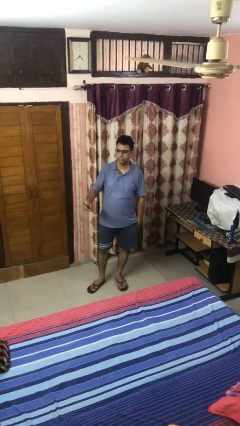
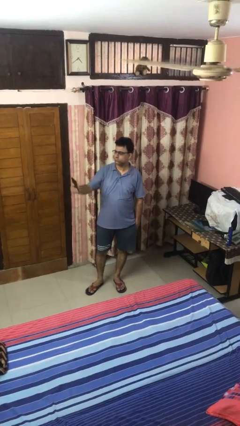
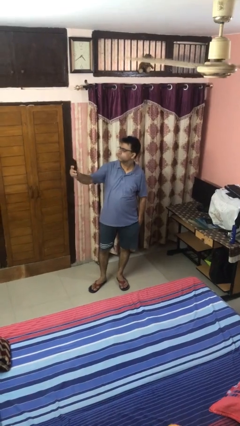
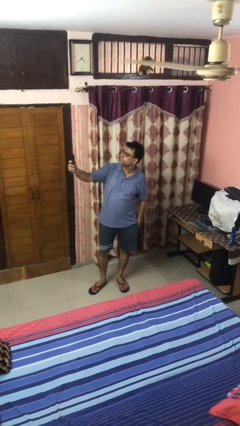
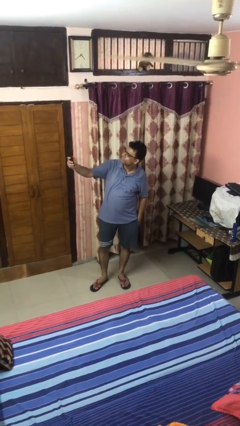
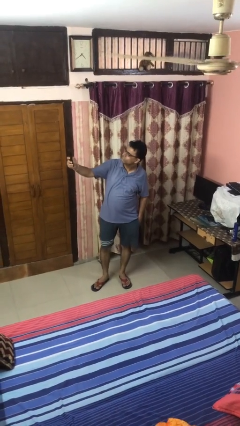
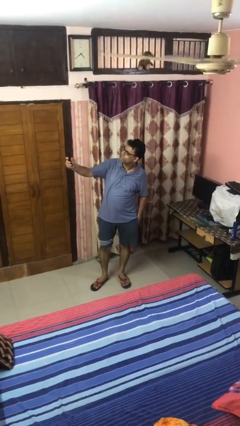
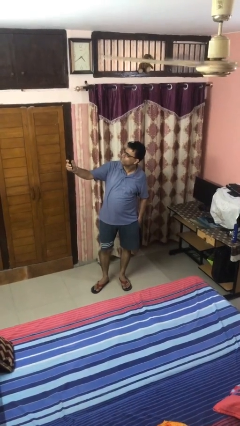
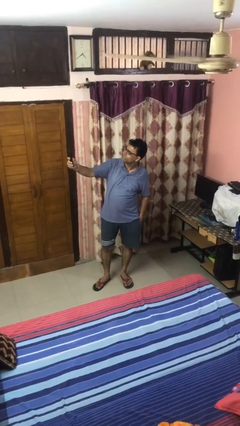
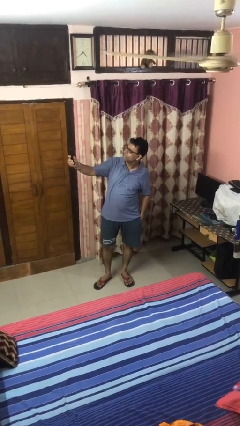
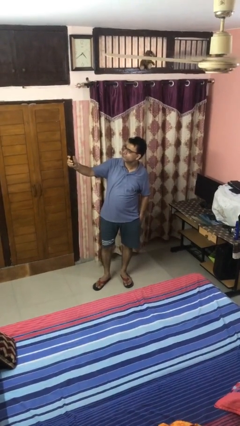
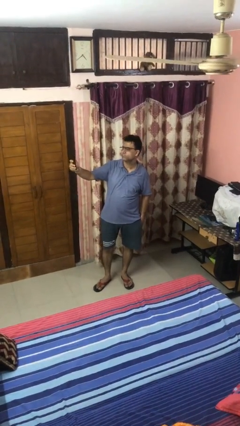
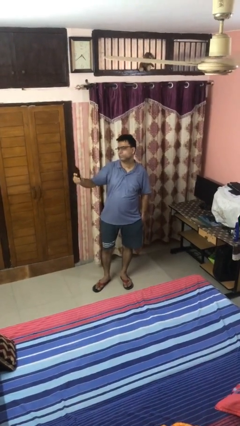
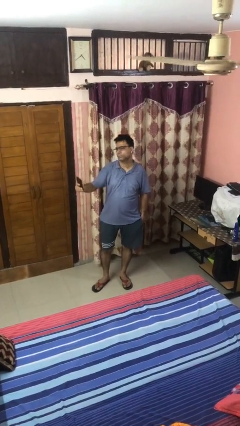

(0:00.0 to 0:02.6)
person takes selfie

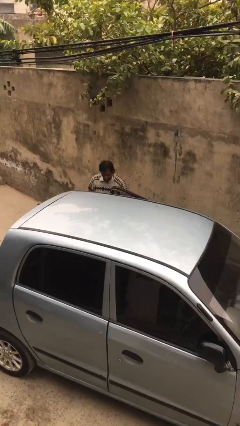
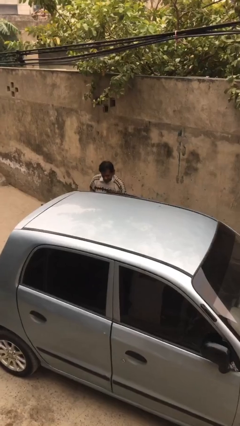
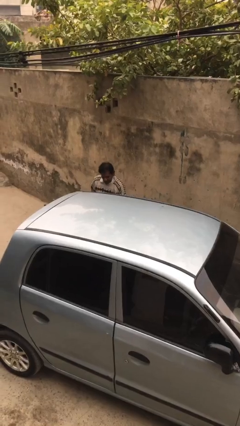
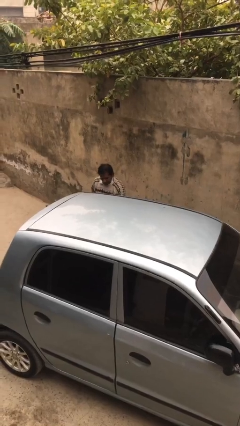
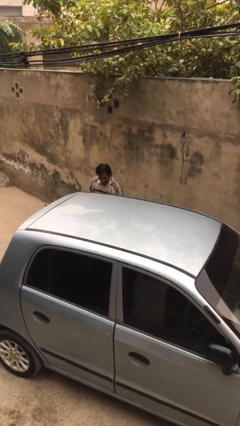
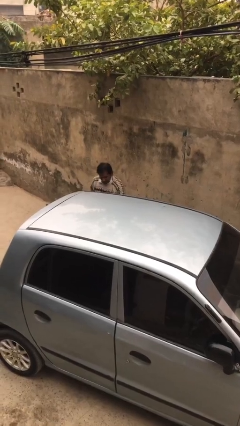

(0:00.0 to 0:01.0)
person closes car door

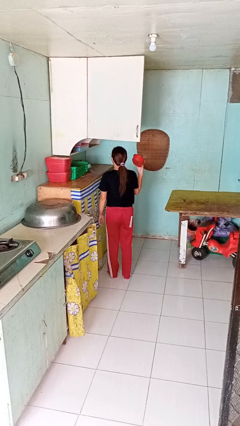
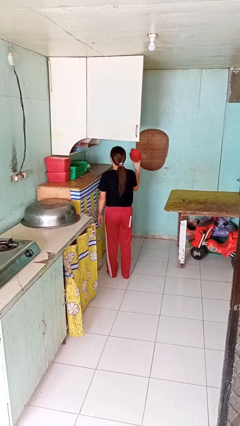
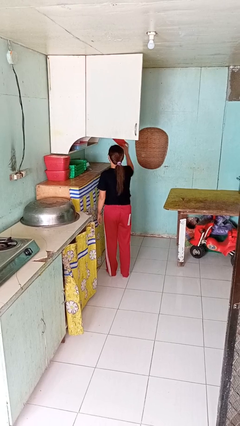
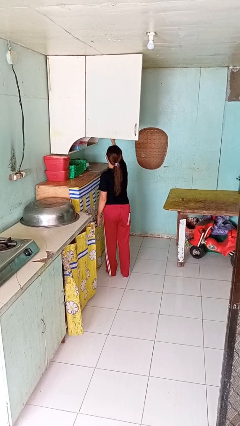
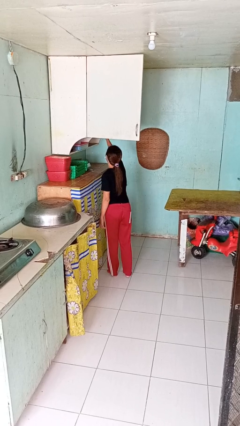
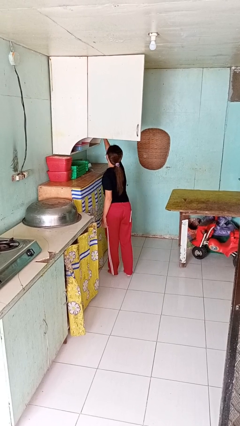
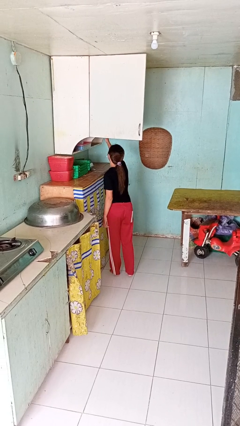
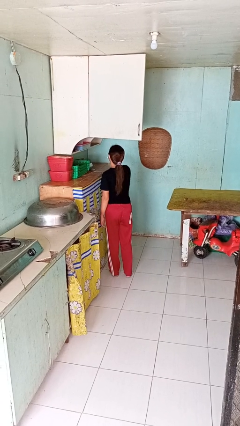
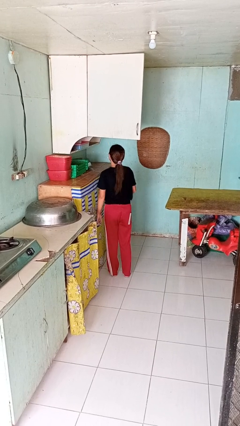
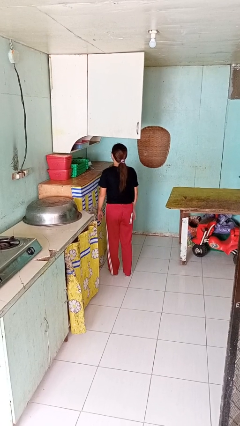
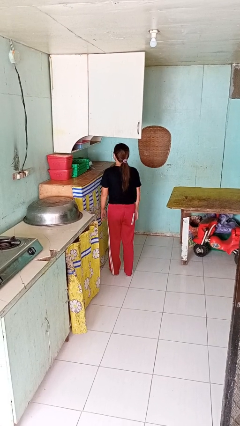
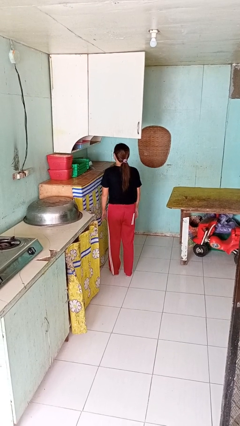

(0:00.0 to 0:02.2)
person puts object in cabinet

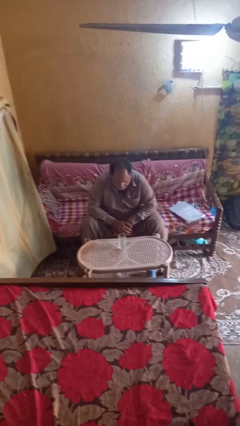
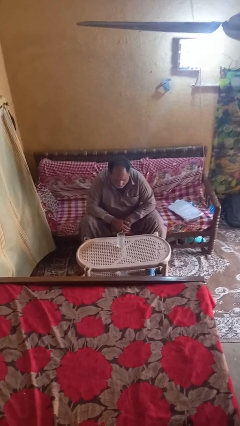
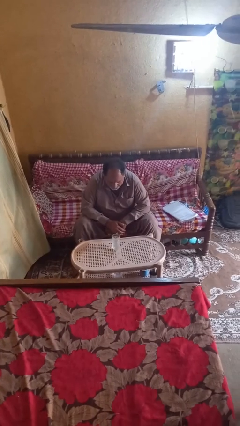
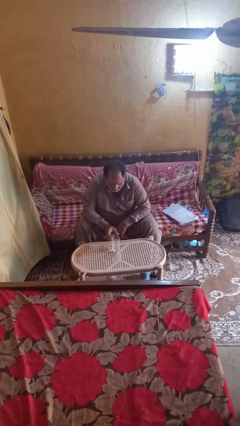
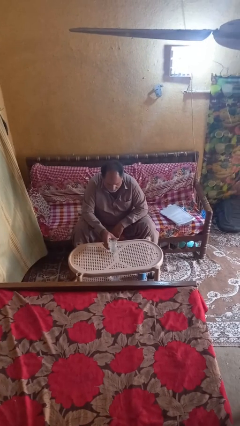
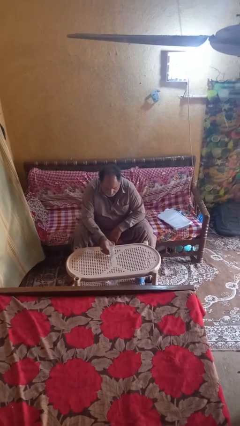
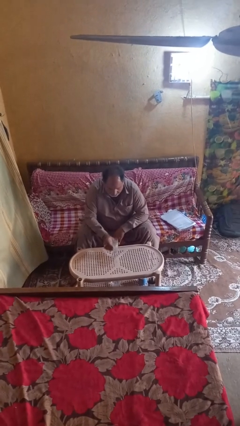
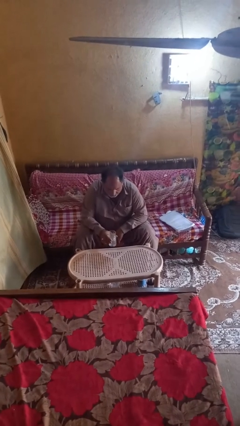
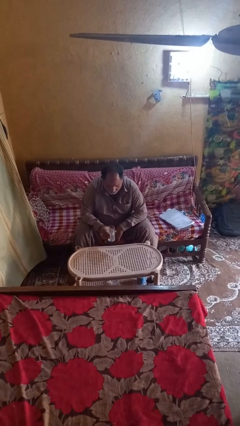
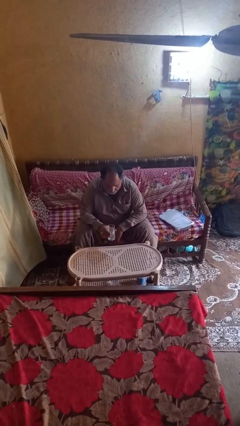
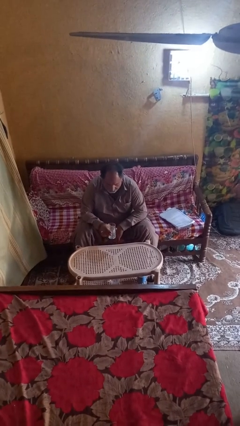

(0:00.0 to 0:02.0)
person picks up object from table

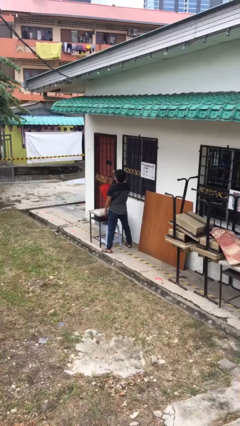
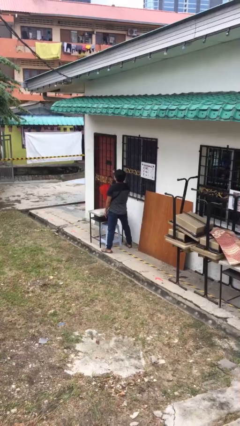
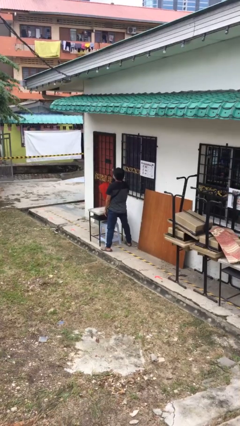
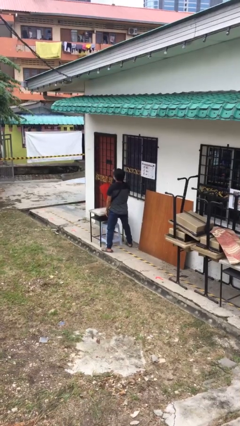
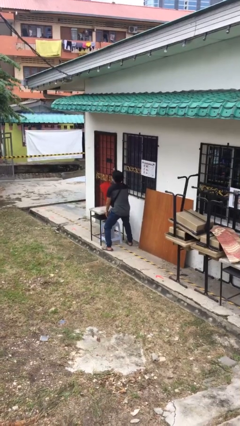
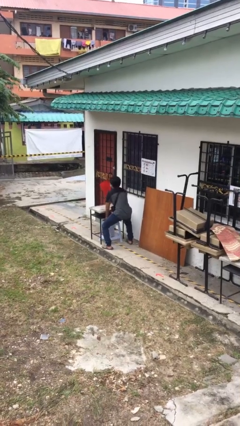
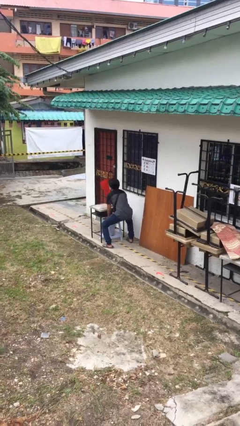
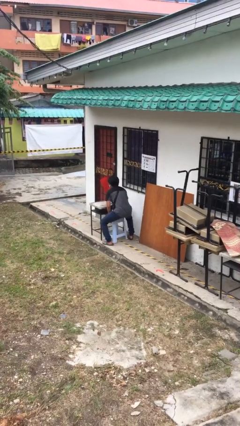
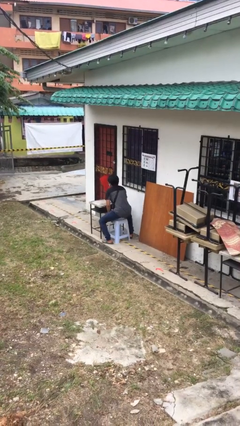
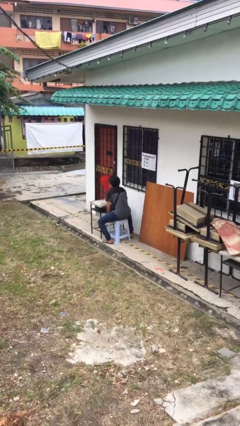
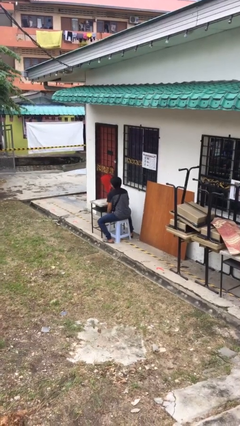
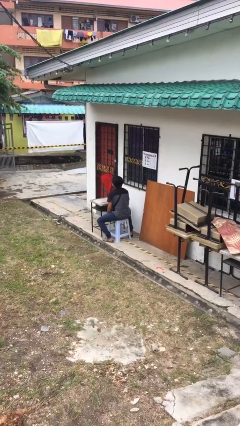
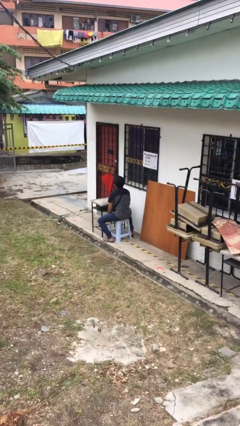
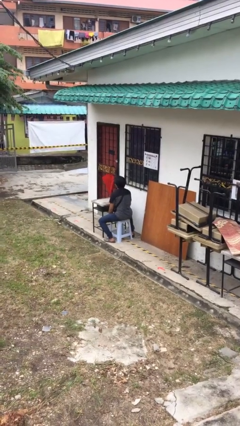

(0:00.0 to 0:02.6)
person sits down

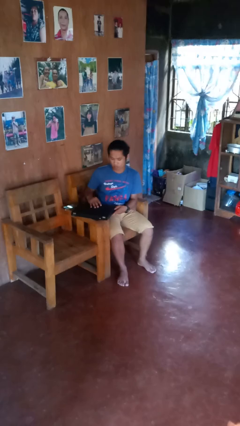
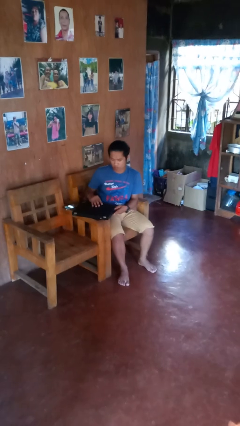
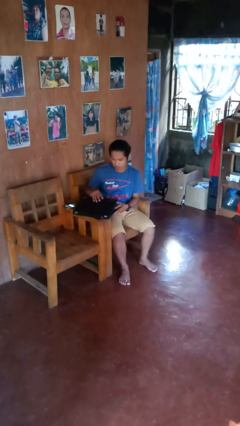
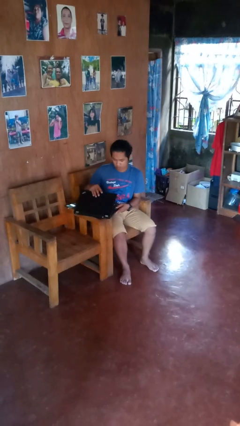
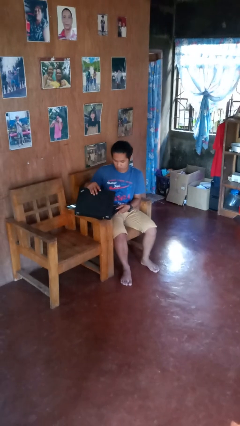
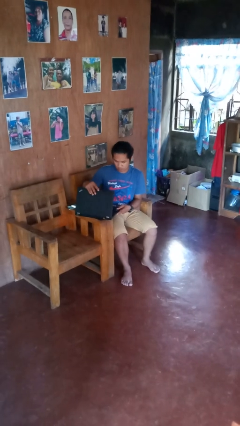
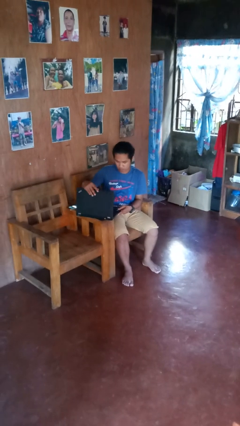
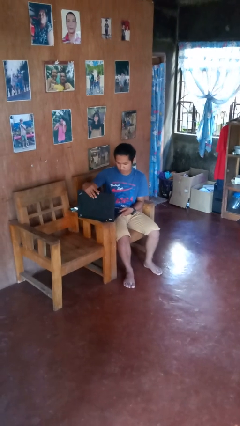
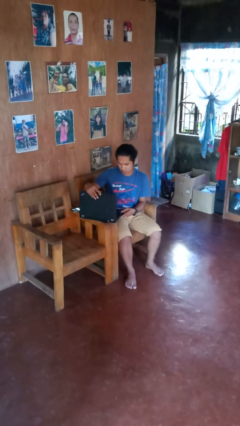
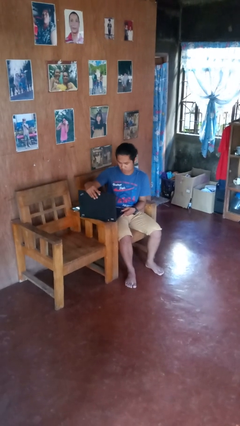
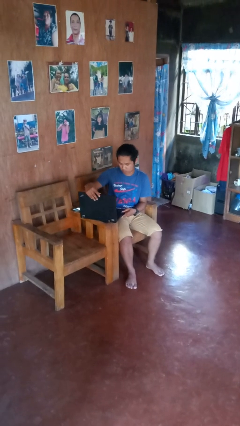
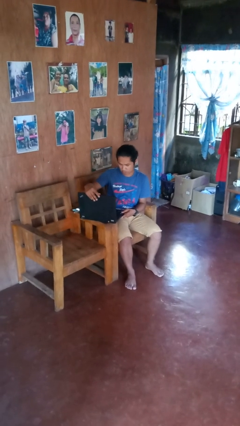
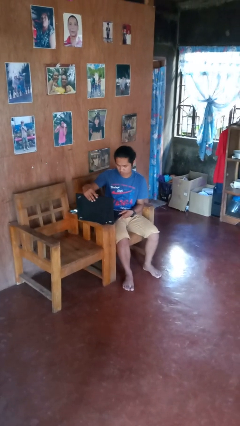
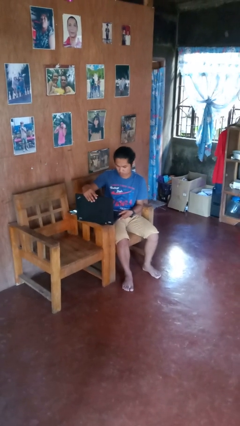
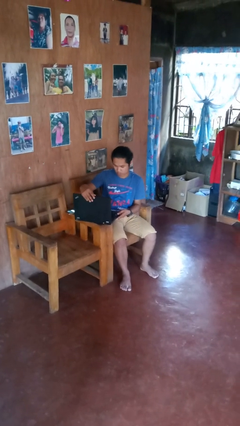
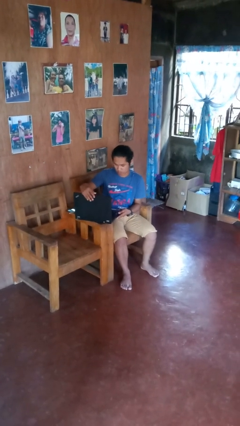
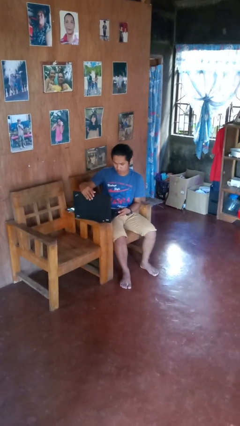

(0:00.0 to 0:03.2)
person opens laptop

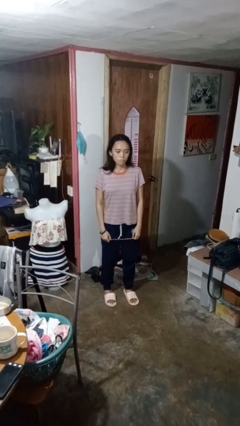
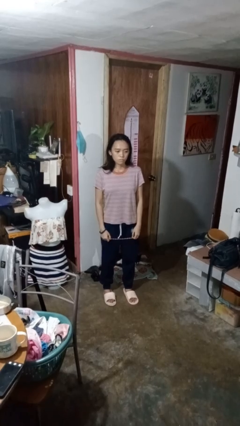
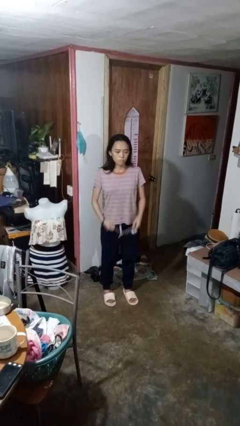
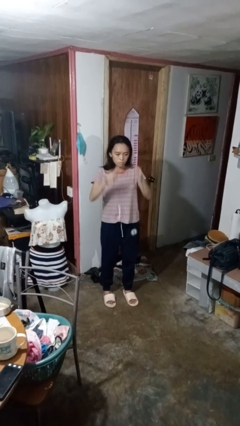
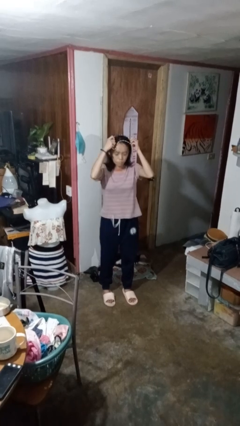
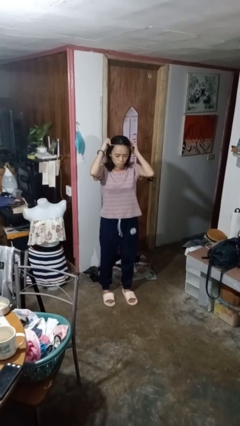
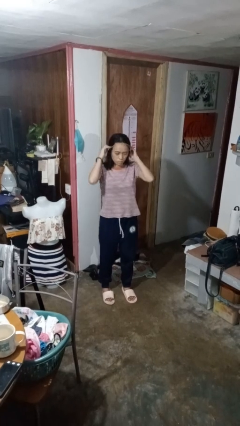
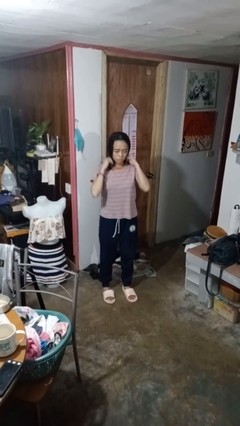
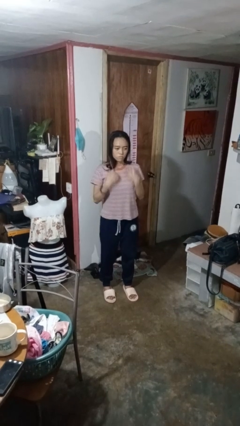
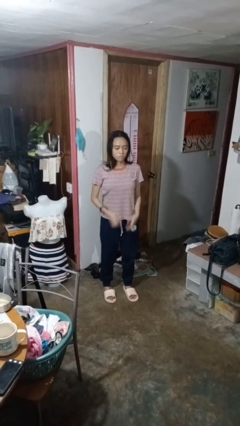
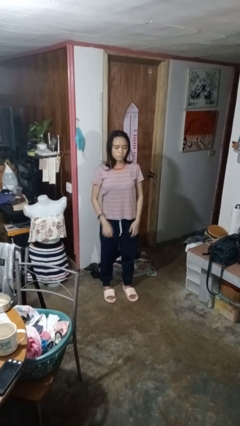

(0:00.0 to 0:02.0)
person puts on necklace

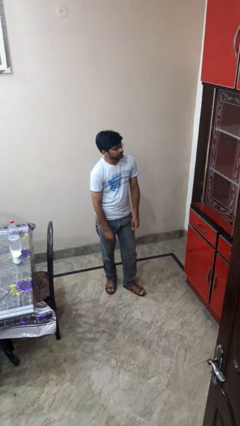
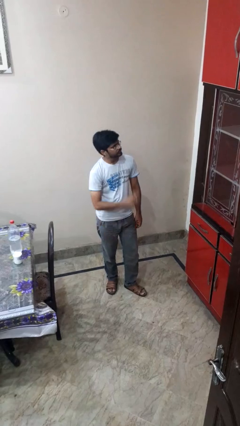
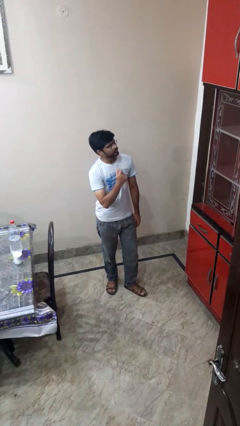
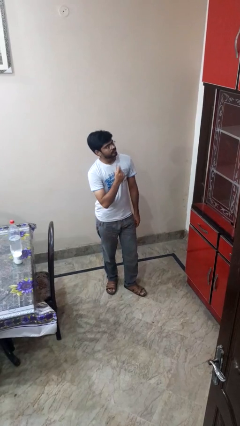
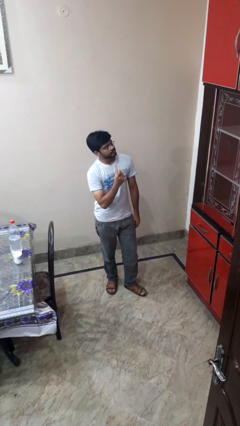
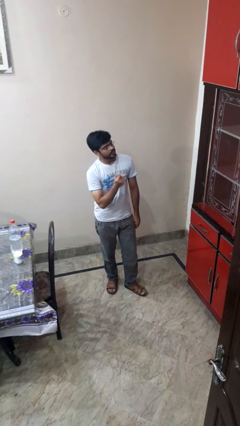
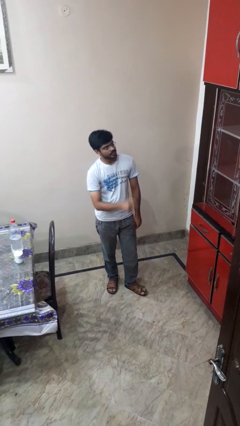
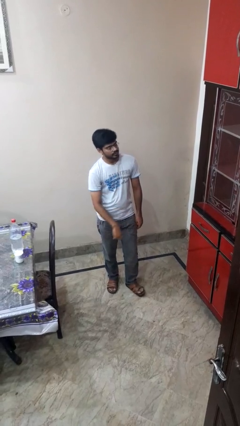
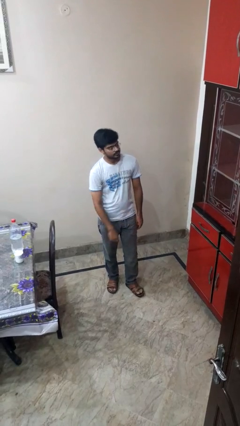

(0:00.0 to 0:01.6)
person snaps fingers
